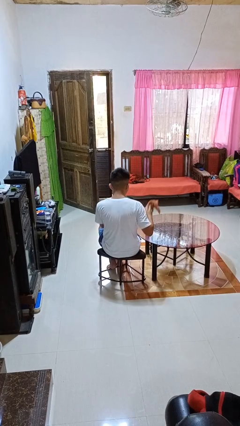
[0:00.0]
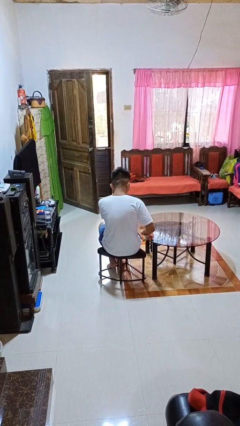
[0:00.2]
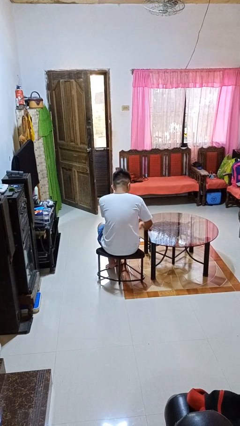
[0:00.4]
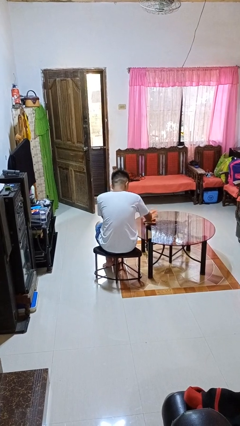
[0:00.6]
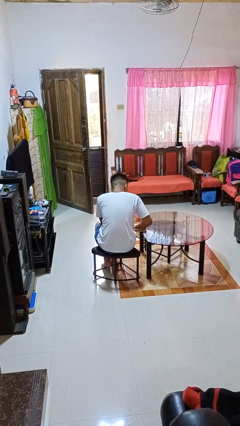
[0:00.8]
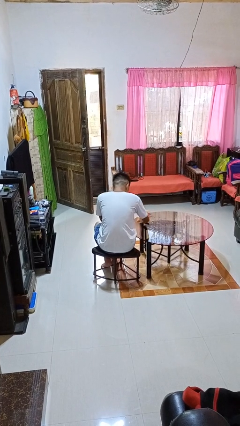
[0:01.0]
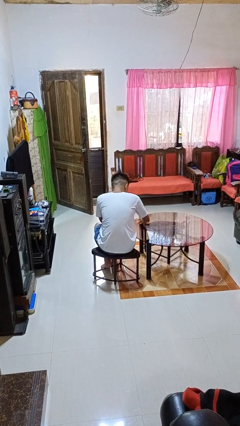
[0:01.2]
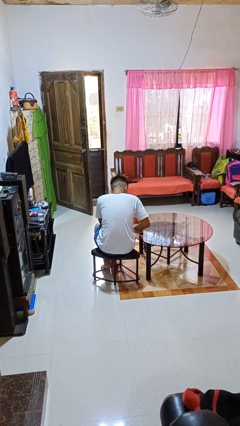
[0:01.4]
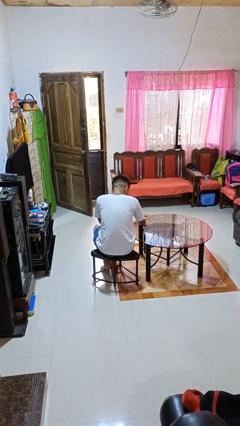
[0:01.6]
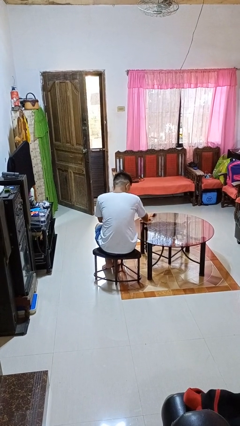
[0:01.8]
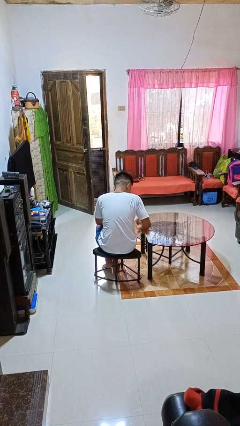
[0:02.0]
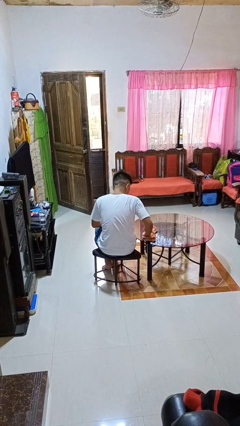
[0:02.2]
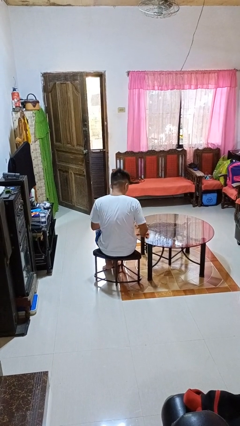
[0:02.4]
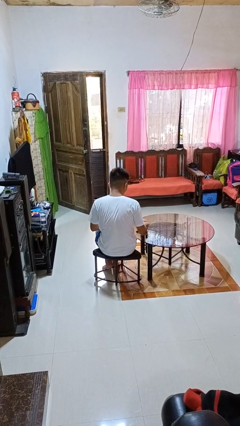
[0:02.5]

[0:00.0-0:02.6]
person cleans table with rag

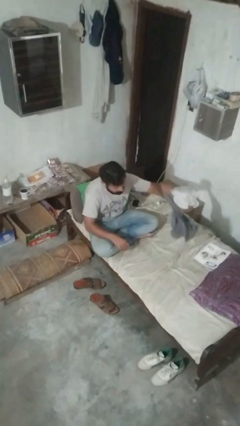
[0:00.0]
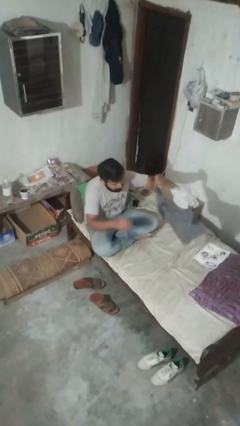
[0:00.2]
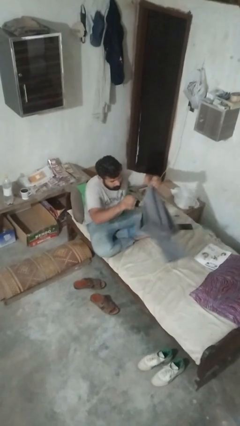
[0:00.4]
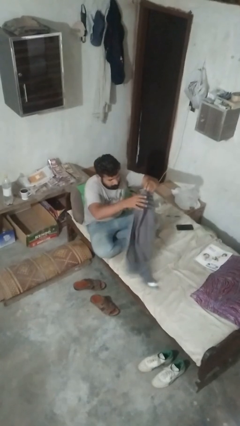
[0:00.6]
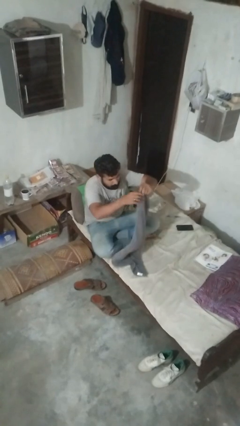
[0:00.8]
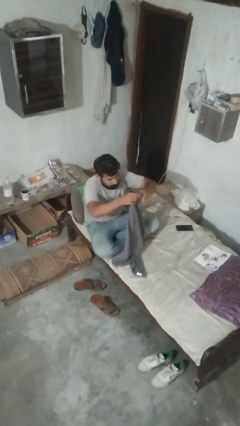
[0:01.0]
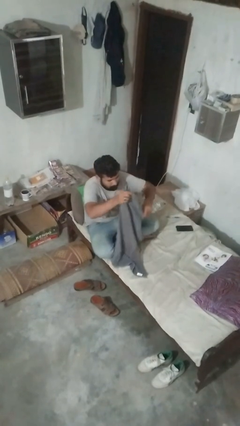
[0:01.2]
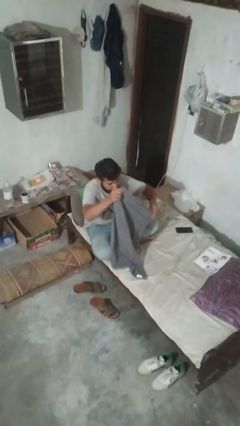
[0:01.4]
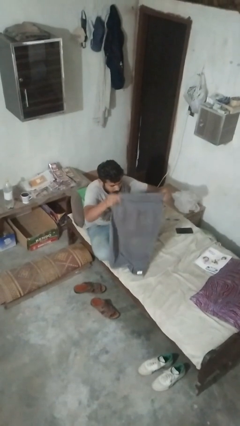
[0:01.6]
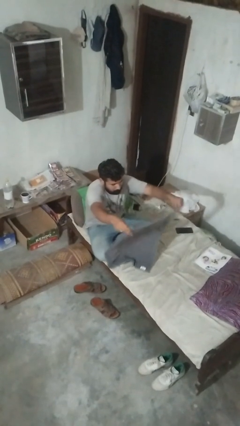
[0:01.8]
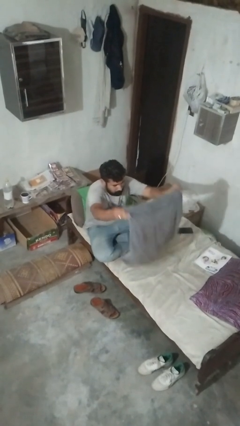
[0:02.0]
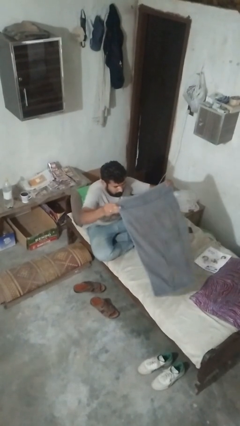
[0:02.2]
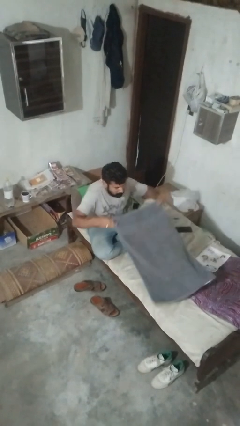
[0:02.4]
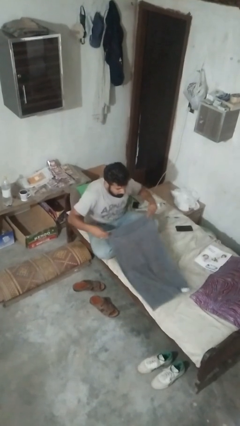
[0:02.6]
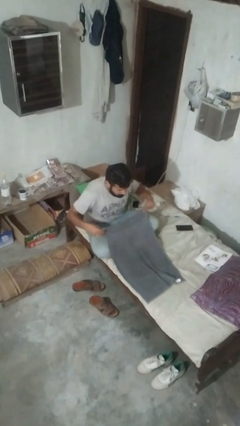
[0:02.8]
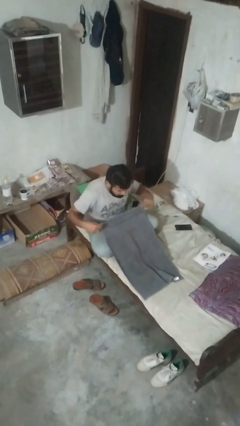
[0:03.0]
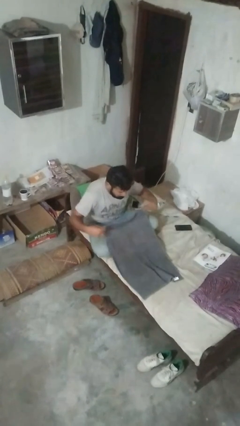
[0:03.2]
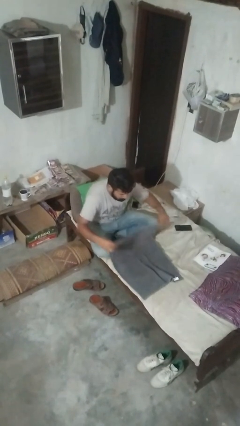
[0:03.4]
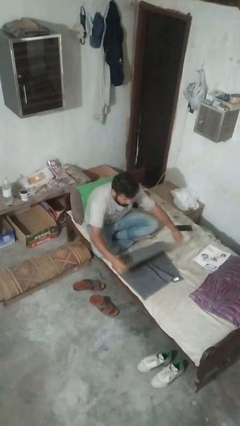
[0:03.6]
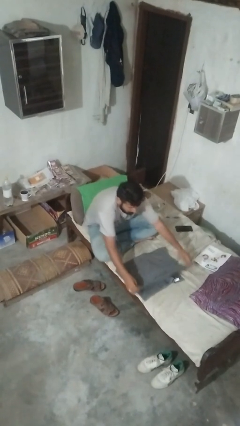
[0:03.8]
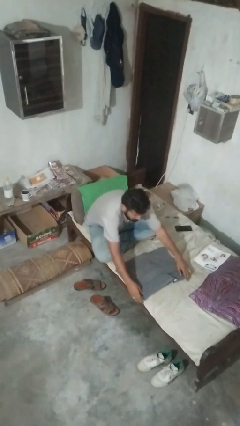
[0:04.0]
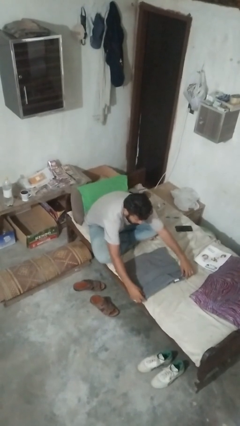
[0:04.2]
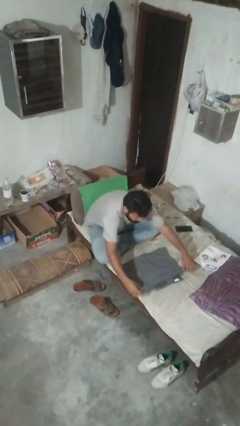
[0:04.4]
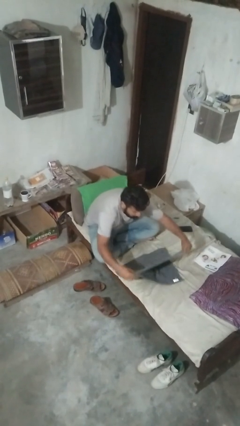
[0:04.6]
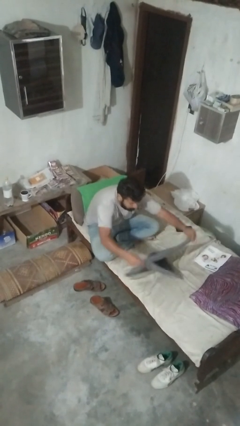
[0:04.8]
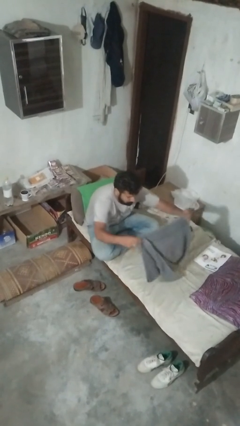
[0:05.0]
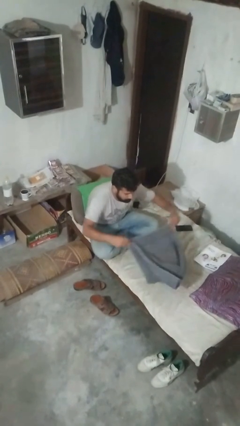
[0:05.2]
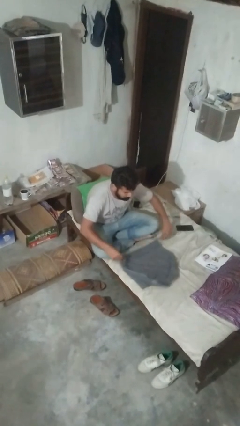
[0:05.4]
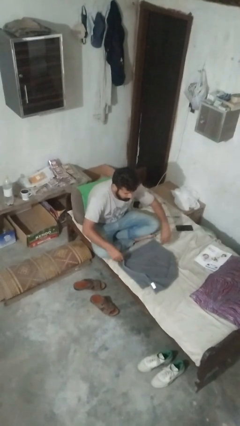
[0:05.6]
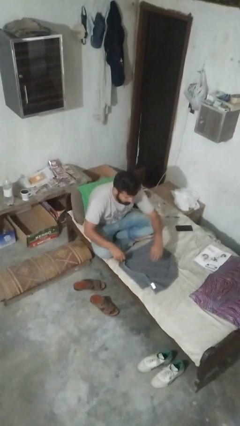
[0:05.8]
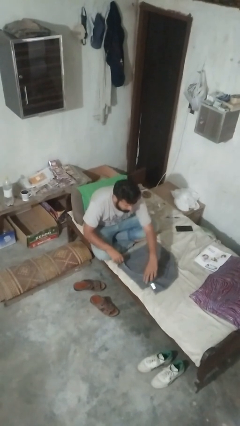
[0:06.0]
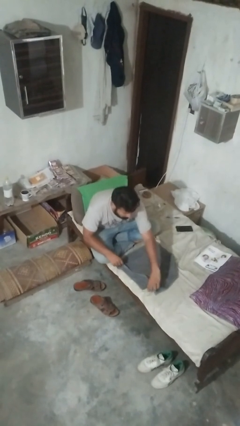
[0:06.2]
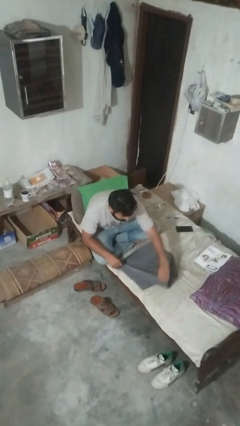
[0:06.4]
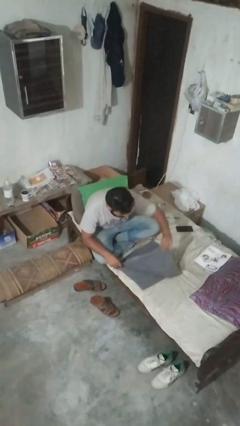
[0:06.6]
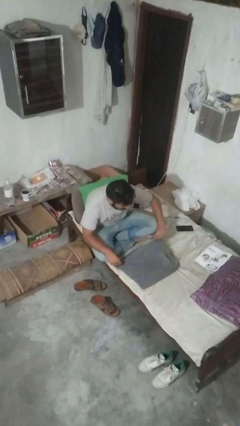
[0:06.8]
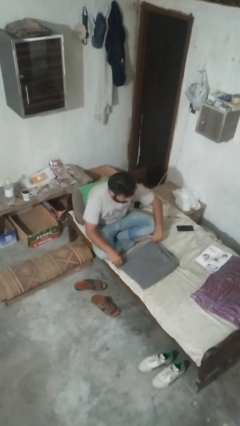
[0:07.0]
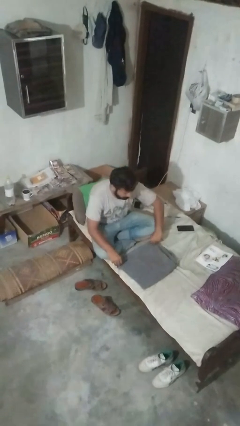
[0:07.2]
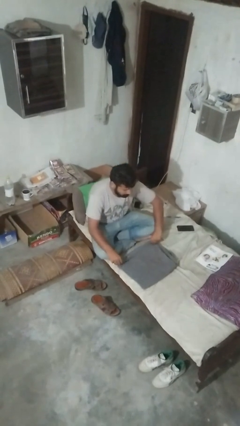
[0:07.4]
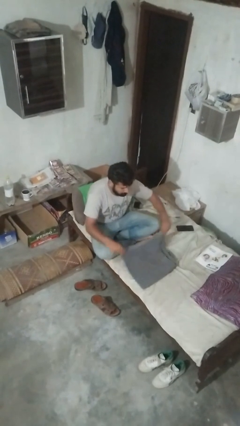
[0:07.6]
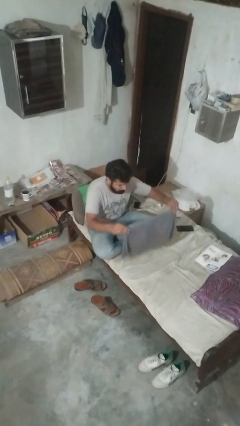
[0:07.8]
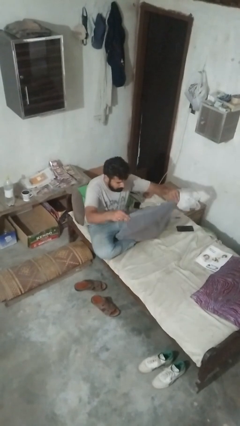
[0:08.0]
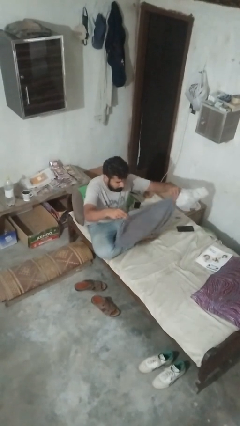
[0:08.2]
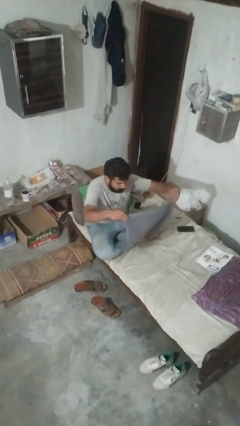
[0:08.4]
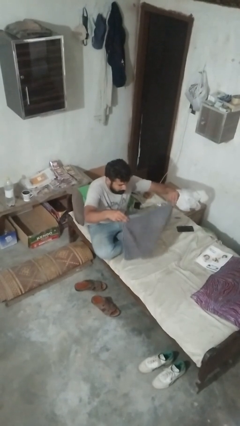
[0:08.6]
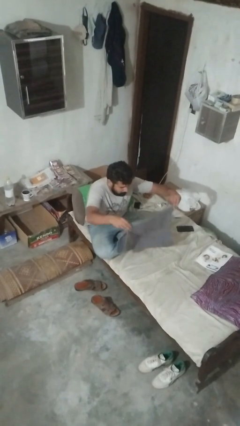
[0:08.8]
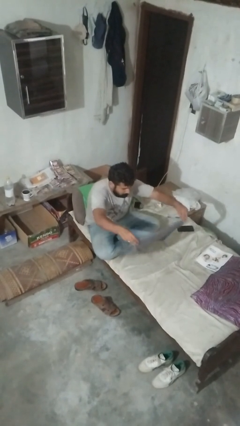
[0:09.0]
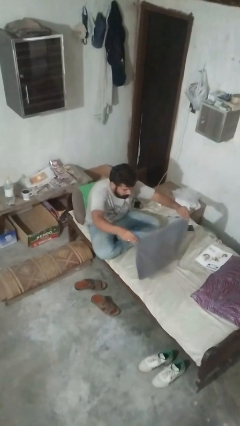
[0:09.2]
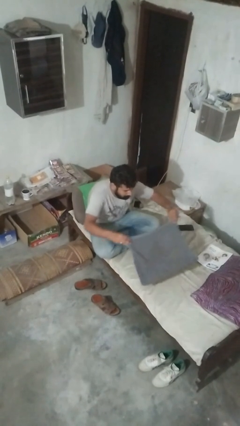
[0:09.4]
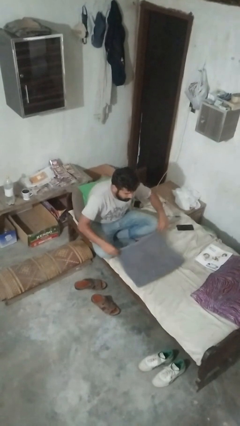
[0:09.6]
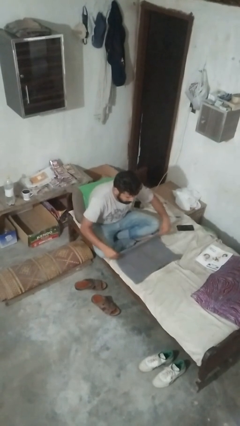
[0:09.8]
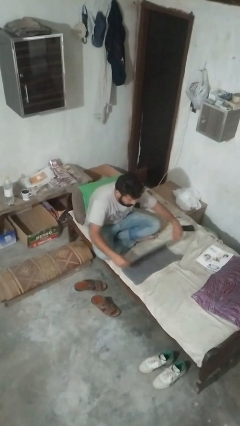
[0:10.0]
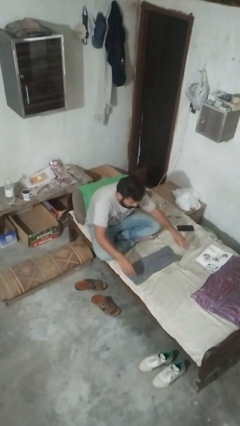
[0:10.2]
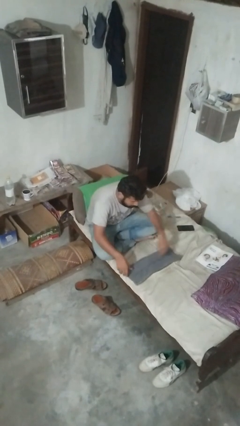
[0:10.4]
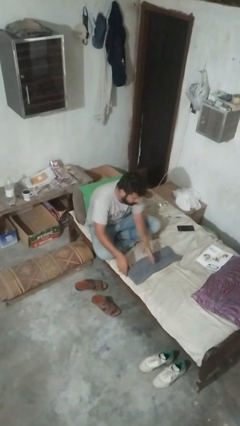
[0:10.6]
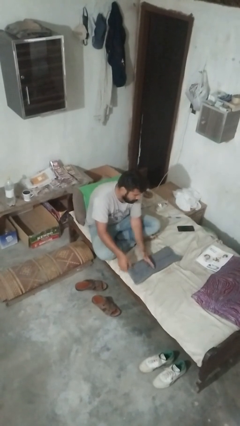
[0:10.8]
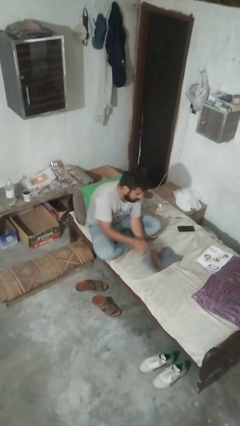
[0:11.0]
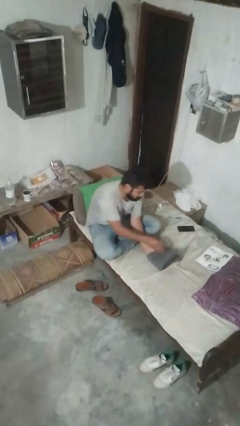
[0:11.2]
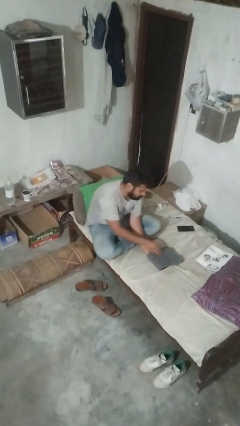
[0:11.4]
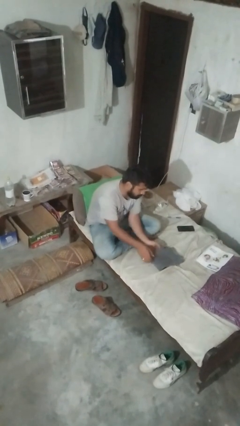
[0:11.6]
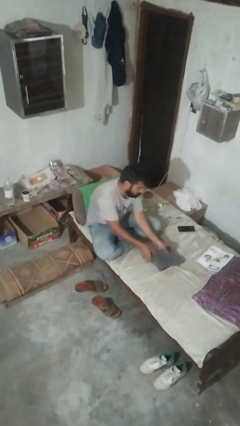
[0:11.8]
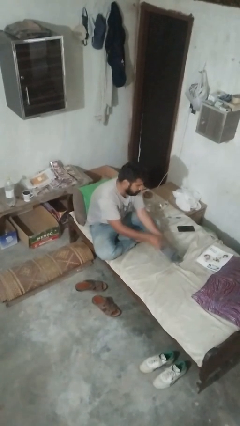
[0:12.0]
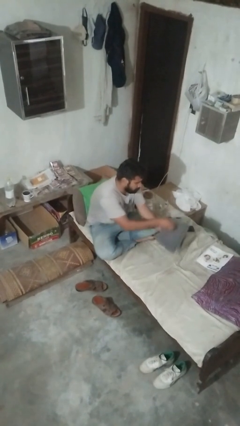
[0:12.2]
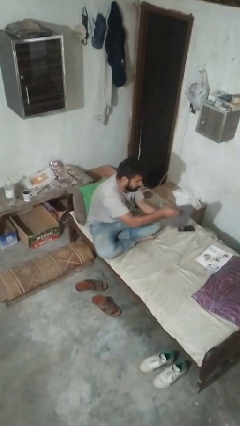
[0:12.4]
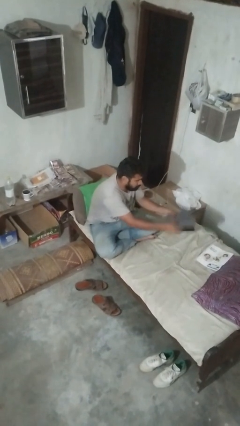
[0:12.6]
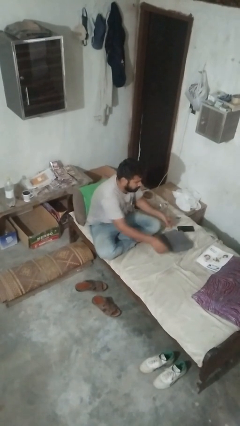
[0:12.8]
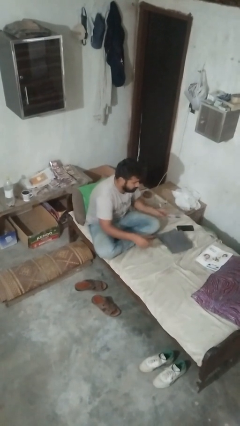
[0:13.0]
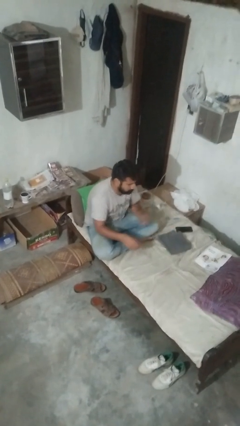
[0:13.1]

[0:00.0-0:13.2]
person folds towel

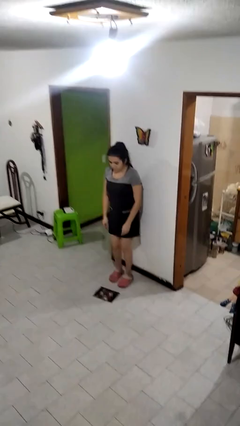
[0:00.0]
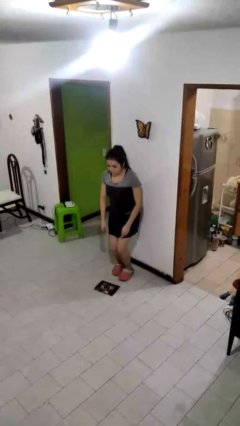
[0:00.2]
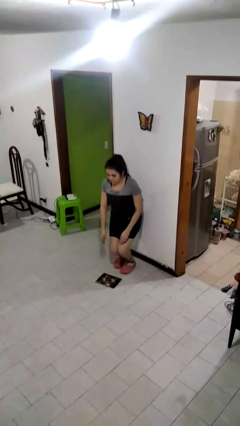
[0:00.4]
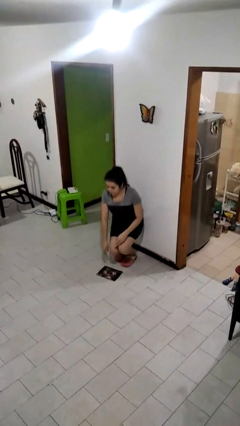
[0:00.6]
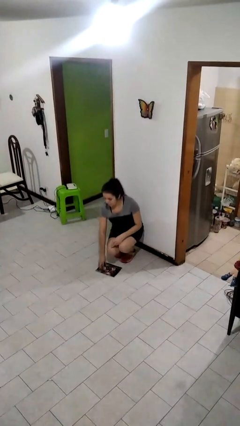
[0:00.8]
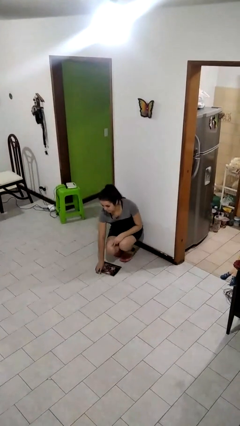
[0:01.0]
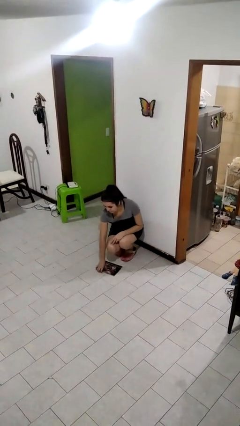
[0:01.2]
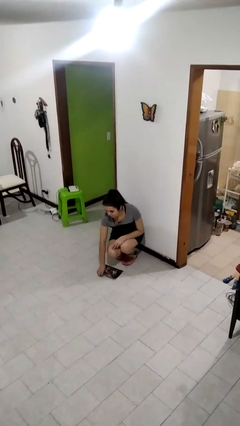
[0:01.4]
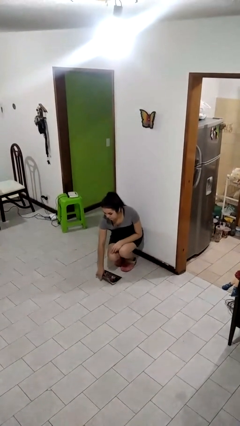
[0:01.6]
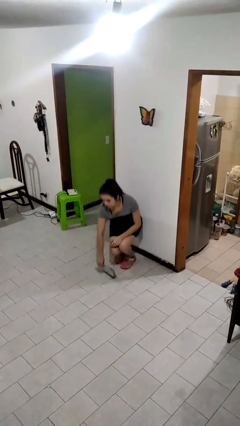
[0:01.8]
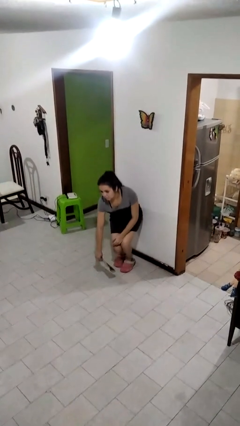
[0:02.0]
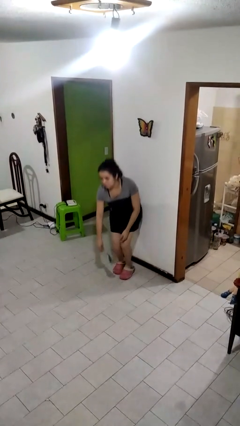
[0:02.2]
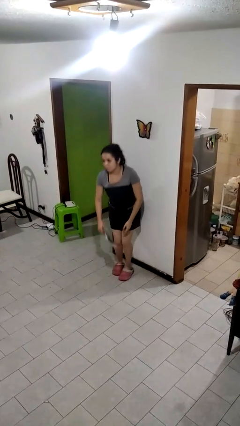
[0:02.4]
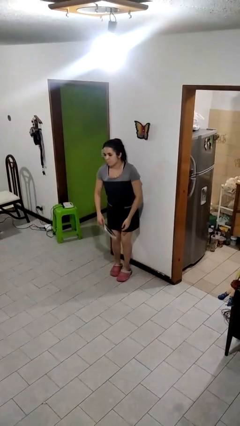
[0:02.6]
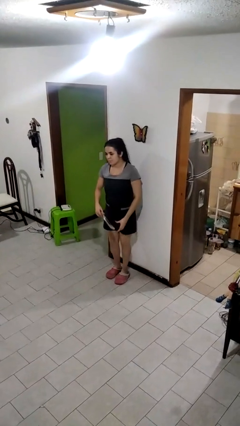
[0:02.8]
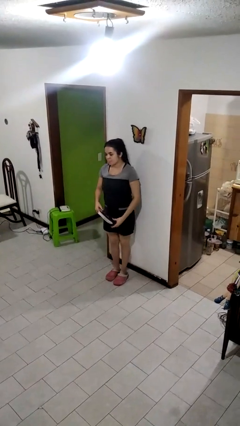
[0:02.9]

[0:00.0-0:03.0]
person picks up object from floor
